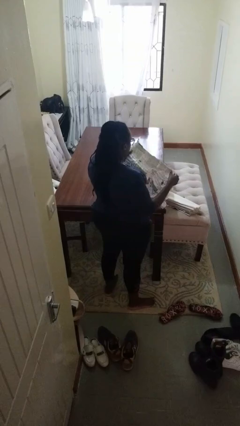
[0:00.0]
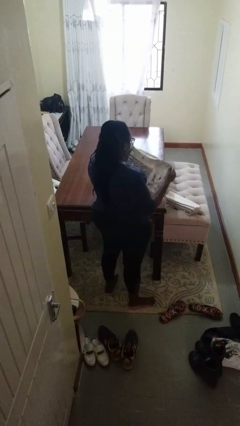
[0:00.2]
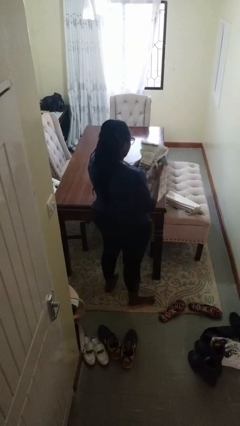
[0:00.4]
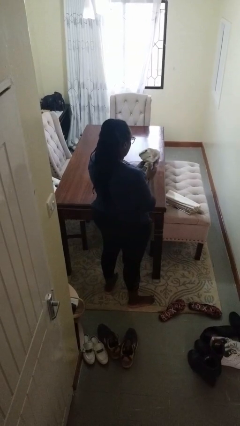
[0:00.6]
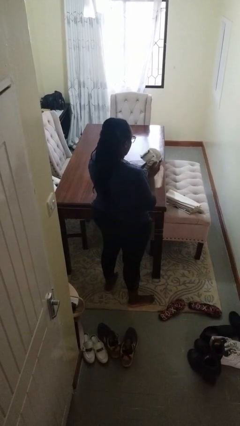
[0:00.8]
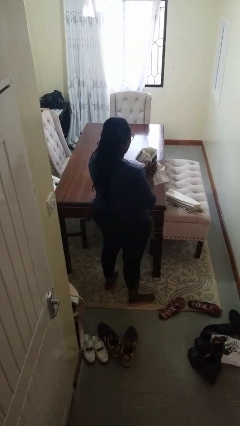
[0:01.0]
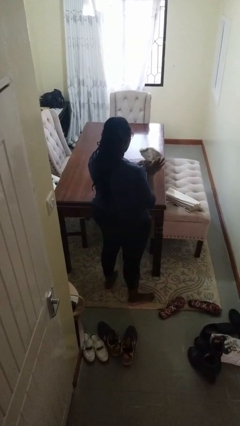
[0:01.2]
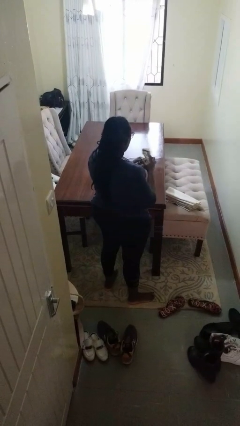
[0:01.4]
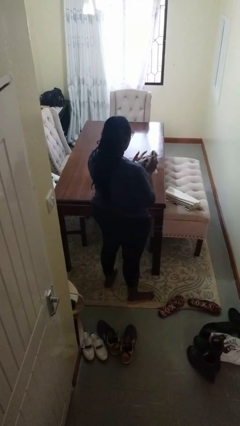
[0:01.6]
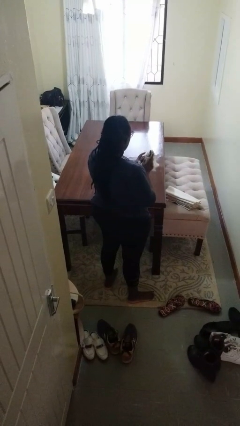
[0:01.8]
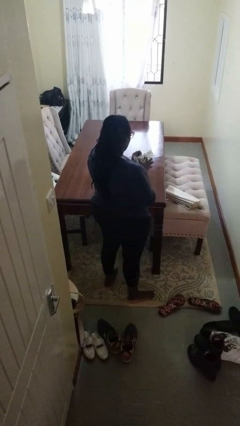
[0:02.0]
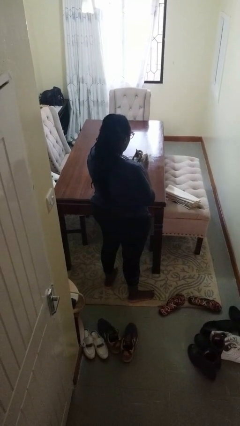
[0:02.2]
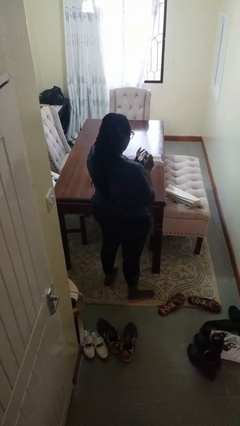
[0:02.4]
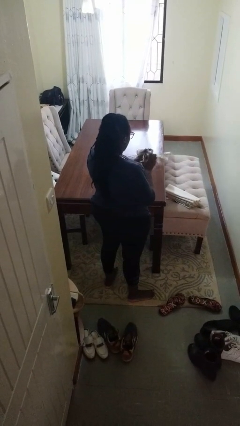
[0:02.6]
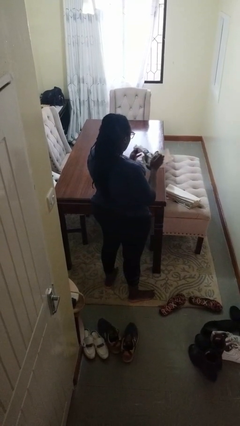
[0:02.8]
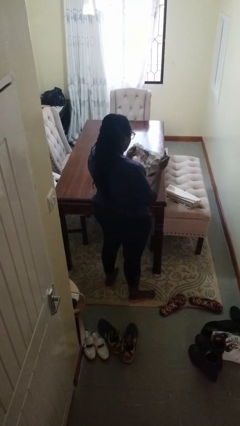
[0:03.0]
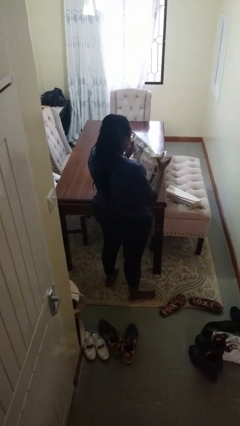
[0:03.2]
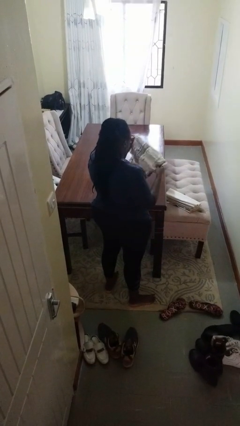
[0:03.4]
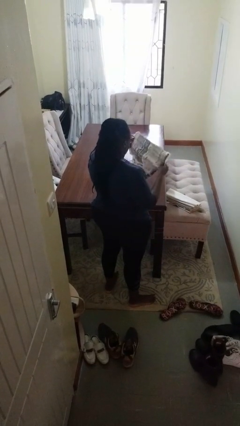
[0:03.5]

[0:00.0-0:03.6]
person crumples paper

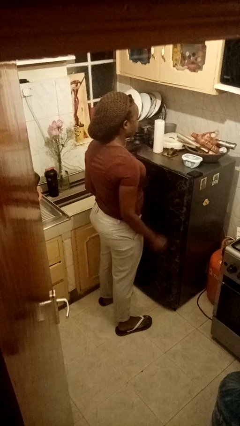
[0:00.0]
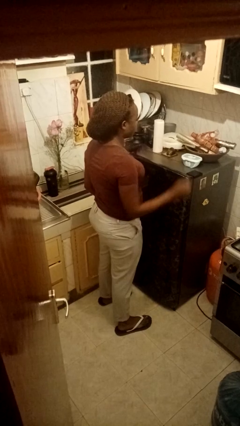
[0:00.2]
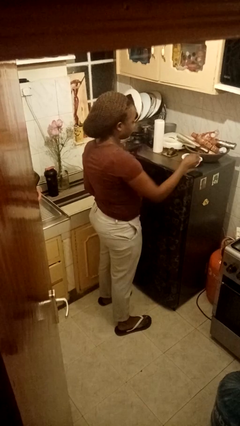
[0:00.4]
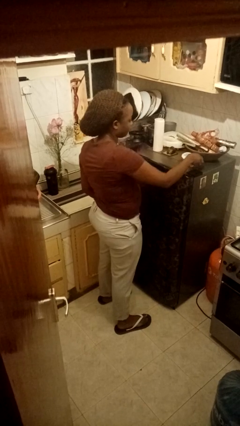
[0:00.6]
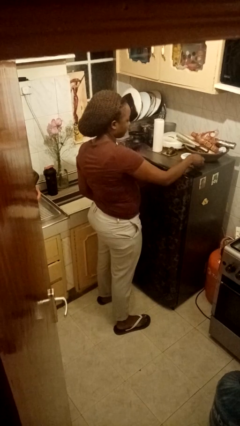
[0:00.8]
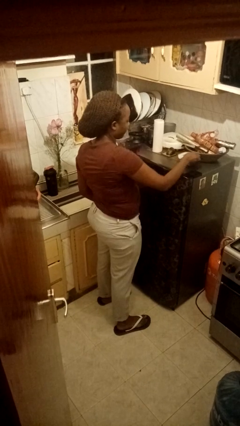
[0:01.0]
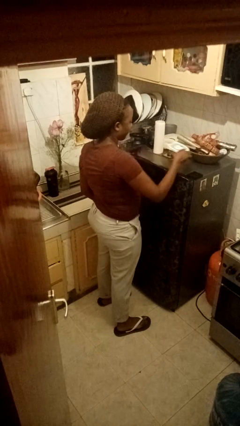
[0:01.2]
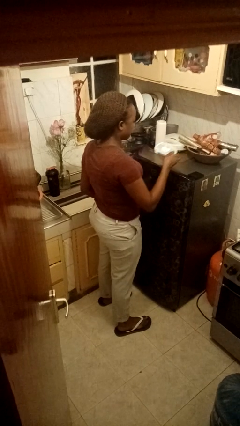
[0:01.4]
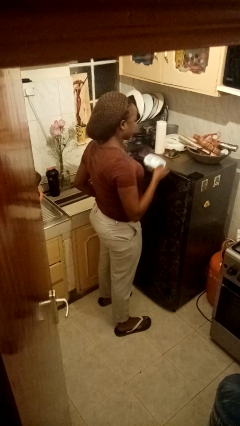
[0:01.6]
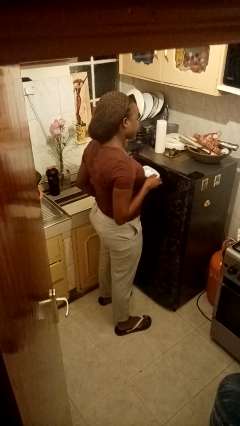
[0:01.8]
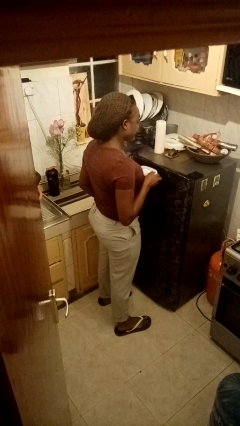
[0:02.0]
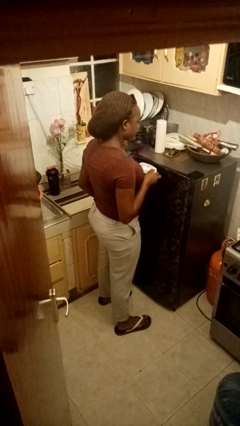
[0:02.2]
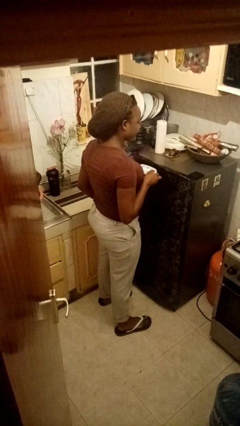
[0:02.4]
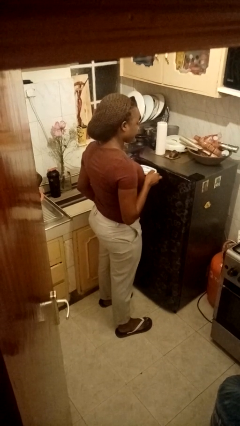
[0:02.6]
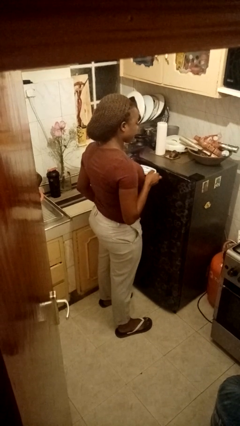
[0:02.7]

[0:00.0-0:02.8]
person picks up object from countertop

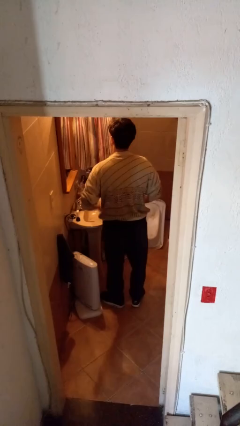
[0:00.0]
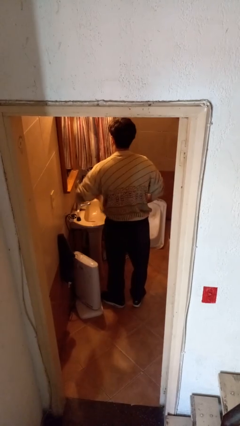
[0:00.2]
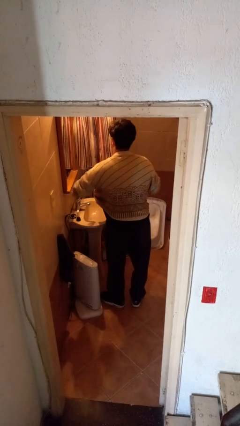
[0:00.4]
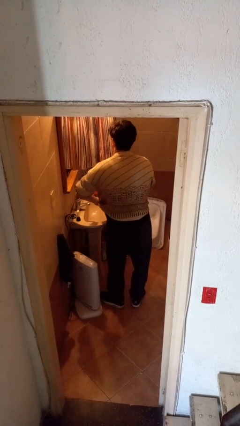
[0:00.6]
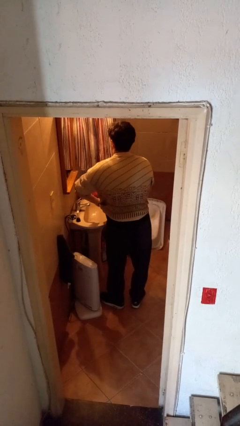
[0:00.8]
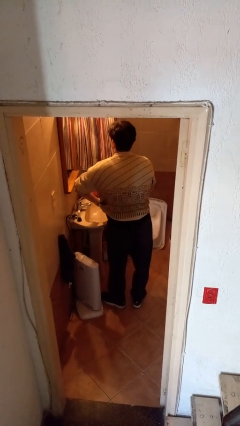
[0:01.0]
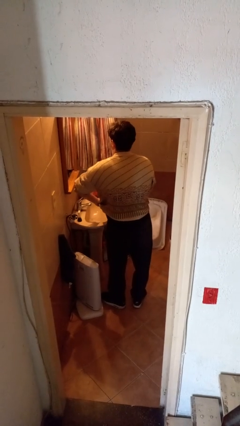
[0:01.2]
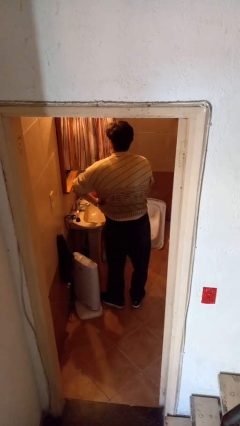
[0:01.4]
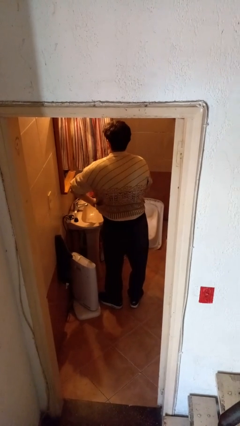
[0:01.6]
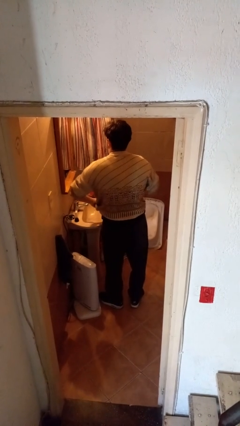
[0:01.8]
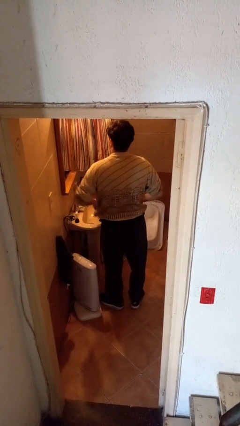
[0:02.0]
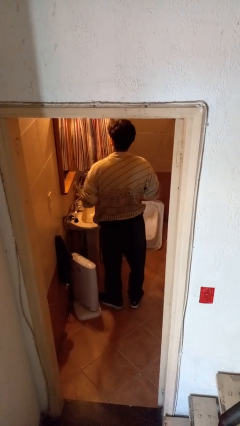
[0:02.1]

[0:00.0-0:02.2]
person applies deodorant

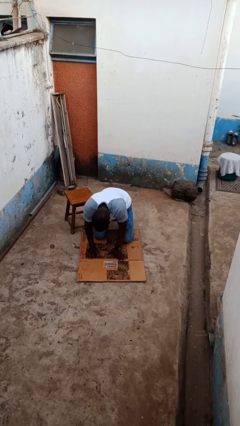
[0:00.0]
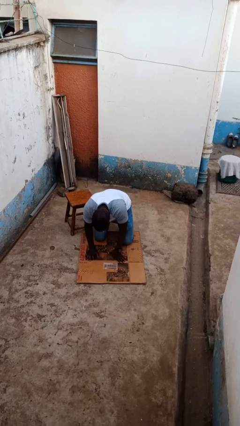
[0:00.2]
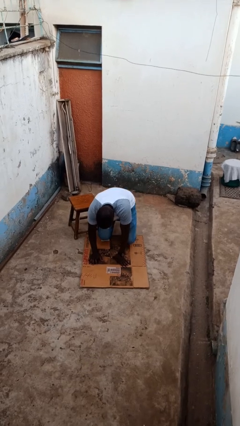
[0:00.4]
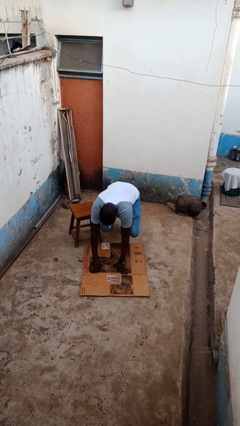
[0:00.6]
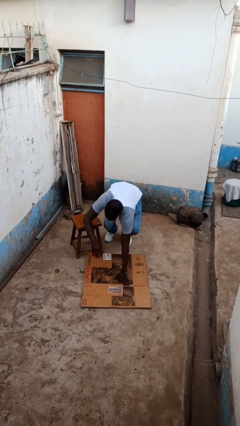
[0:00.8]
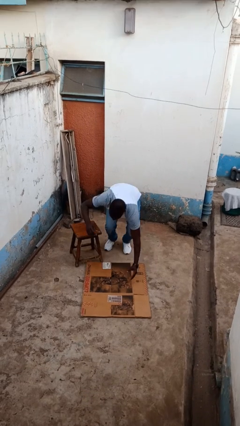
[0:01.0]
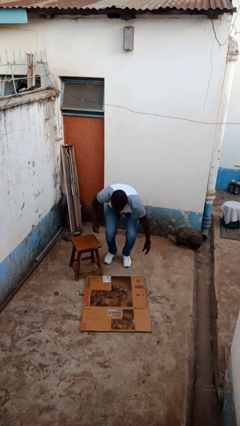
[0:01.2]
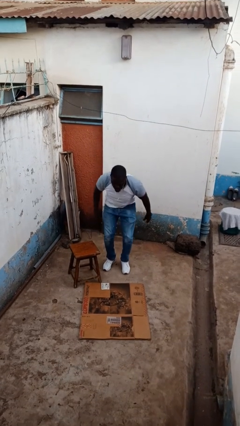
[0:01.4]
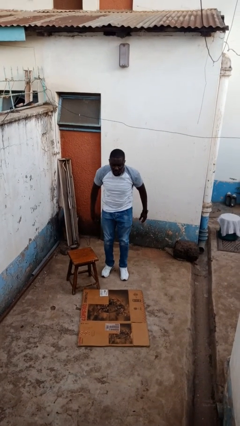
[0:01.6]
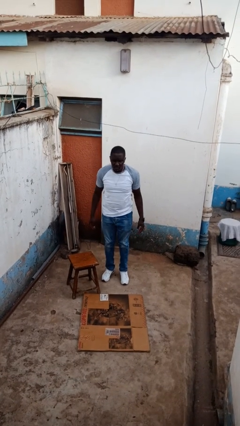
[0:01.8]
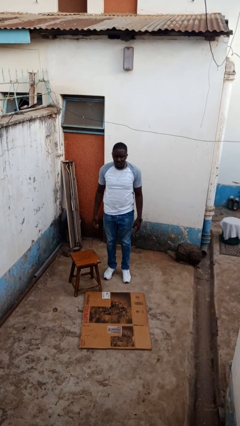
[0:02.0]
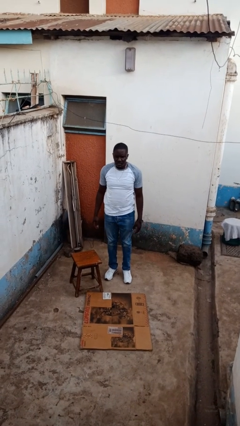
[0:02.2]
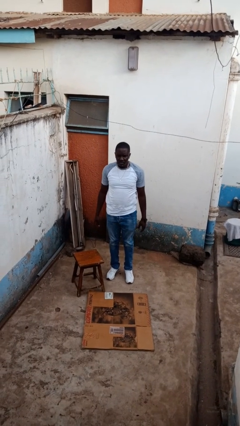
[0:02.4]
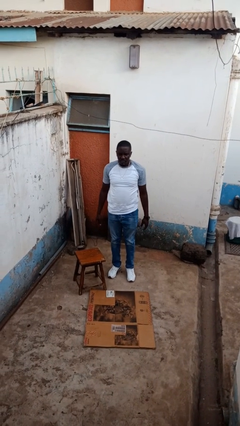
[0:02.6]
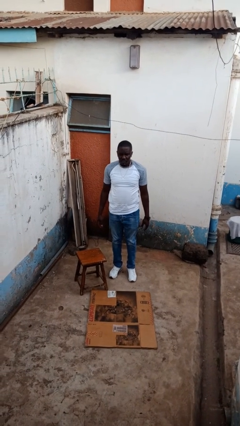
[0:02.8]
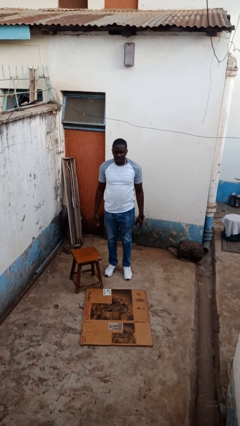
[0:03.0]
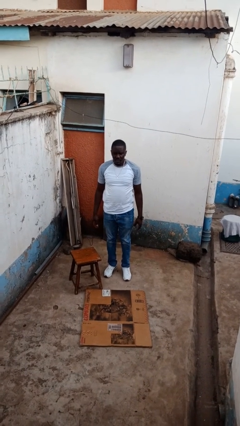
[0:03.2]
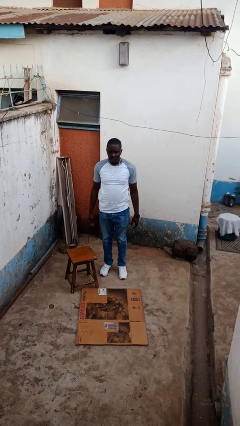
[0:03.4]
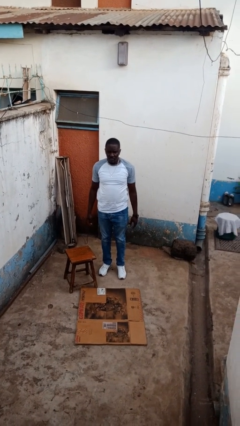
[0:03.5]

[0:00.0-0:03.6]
person stands up from floor

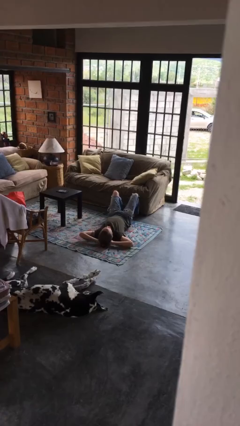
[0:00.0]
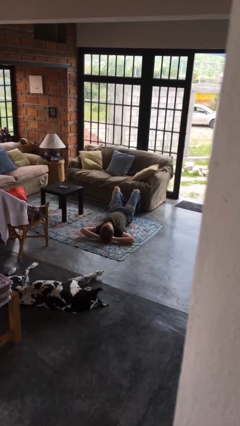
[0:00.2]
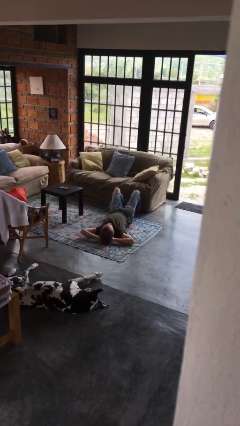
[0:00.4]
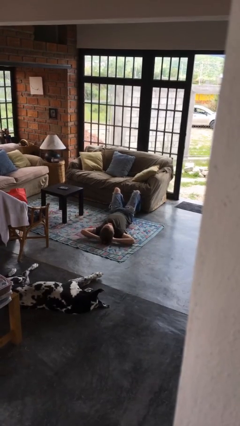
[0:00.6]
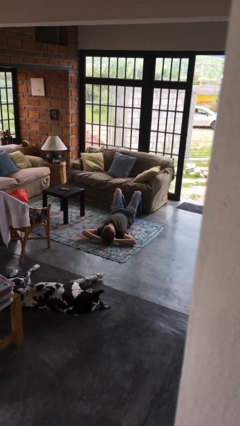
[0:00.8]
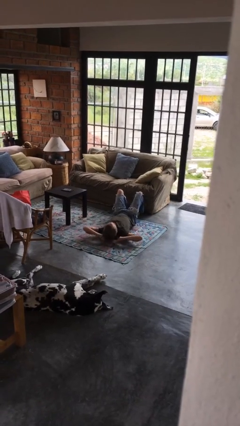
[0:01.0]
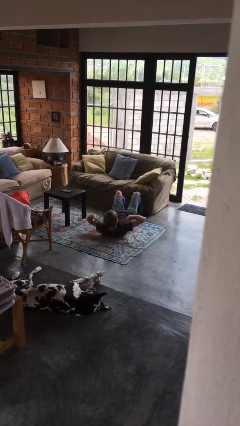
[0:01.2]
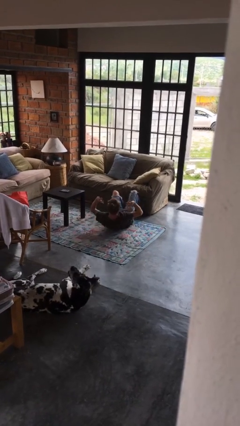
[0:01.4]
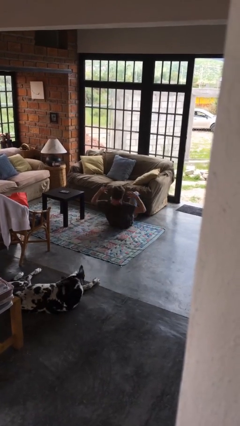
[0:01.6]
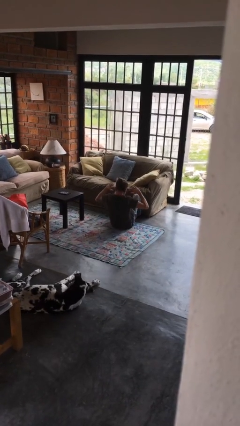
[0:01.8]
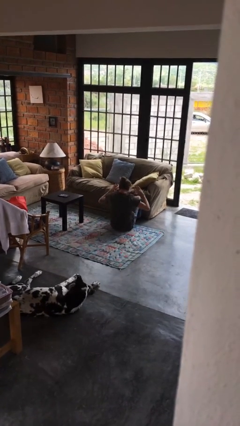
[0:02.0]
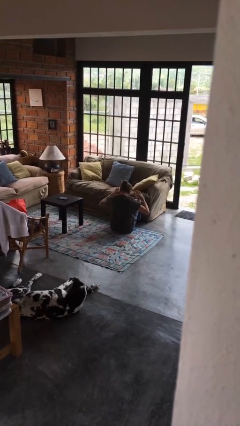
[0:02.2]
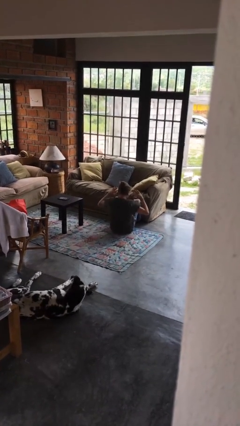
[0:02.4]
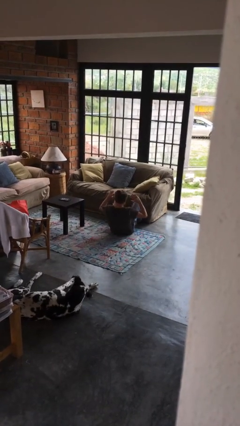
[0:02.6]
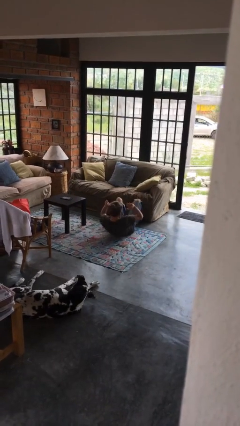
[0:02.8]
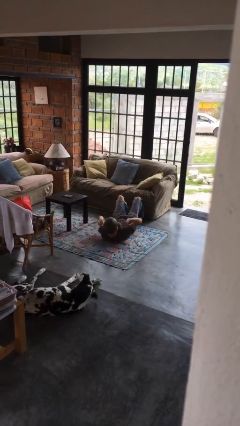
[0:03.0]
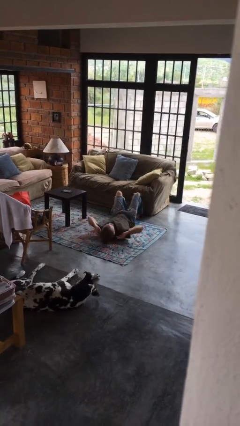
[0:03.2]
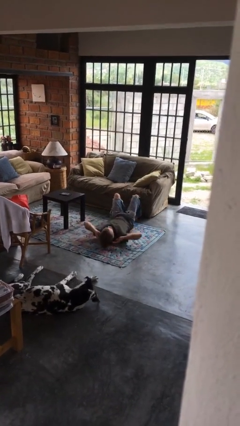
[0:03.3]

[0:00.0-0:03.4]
person exercises with situp

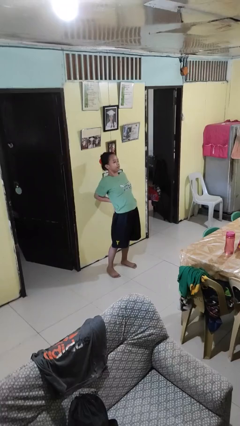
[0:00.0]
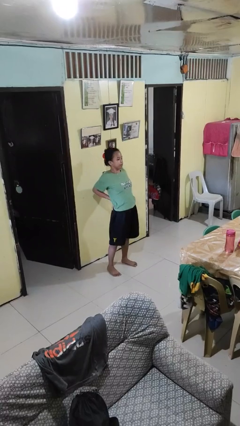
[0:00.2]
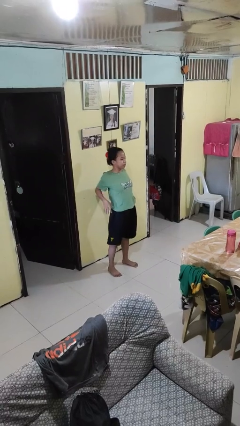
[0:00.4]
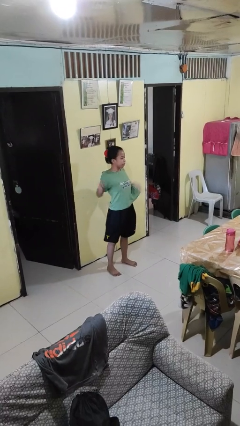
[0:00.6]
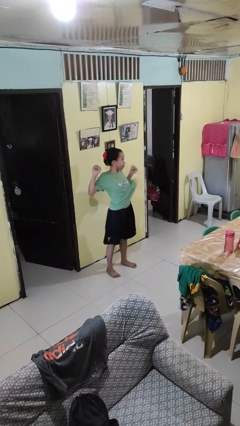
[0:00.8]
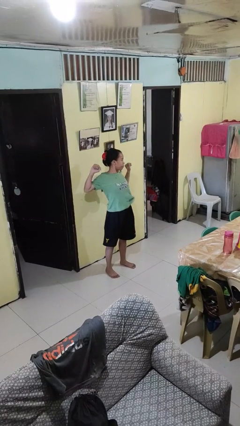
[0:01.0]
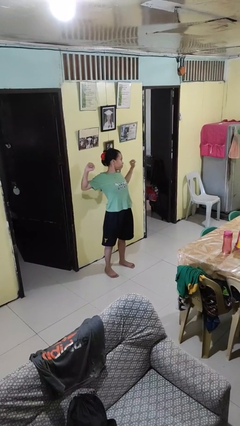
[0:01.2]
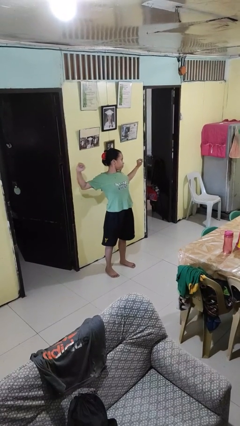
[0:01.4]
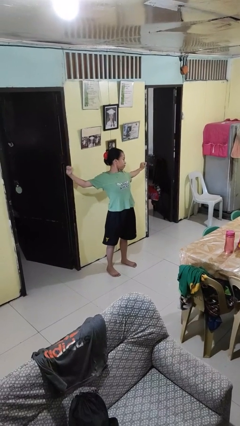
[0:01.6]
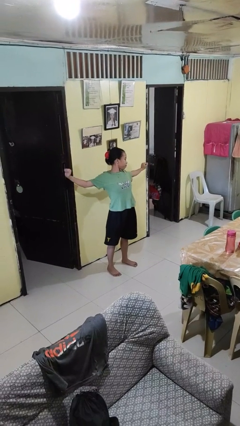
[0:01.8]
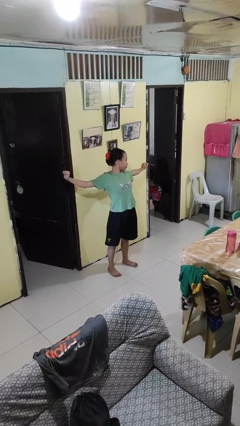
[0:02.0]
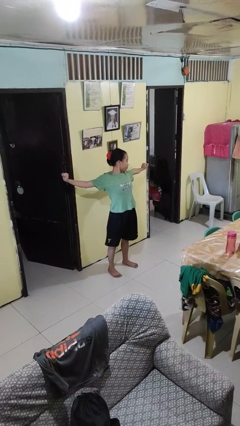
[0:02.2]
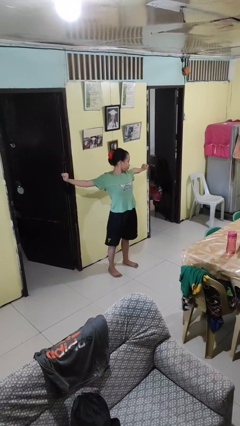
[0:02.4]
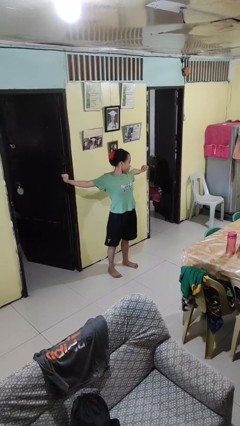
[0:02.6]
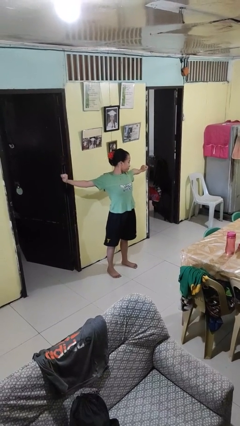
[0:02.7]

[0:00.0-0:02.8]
person stretches arms to side
